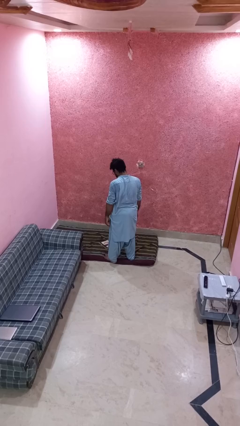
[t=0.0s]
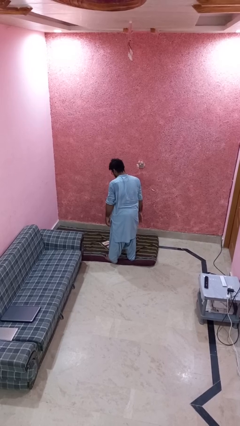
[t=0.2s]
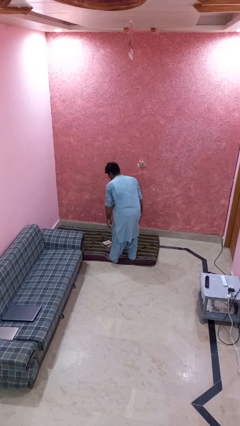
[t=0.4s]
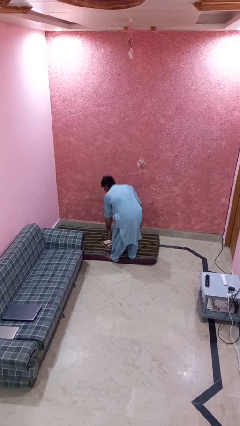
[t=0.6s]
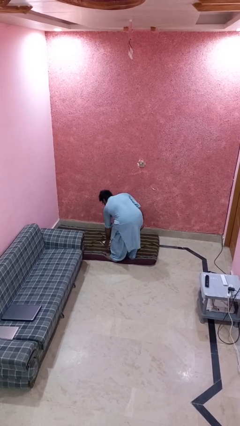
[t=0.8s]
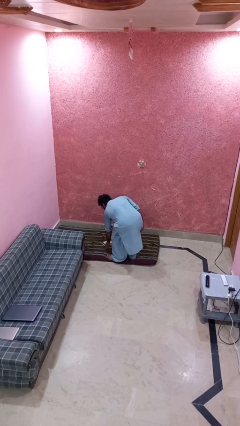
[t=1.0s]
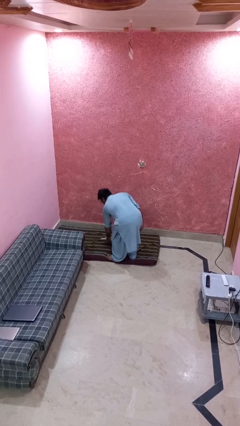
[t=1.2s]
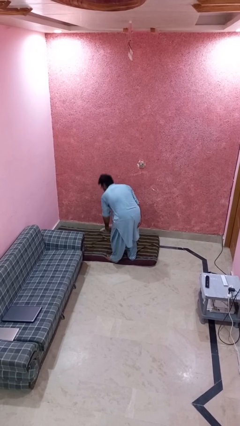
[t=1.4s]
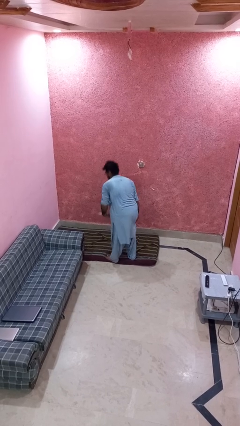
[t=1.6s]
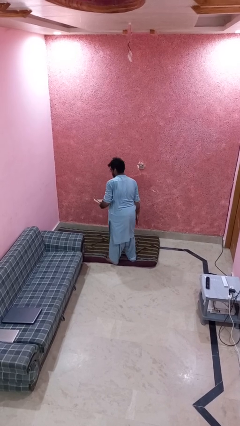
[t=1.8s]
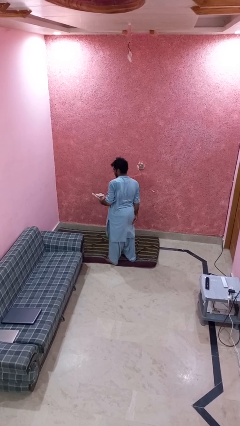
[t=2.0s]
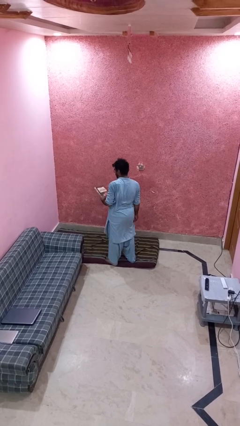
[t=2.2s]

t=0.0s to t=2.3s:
person picks up object from floor

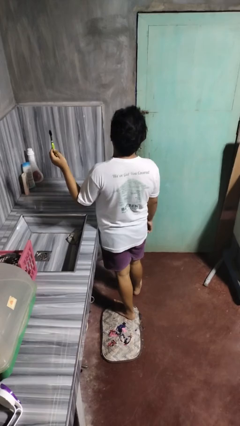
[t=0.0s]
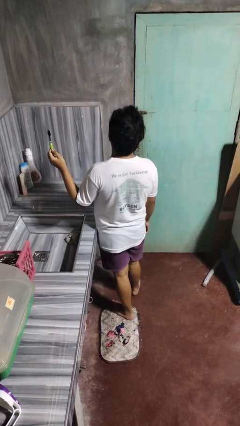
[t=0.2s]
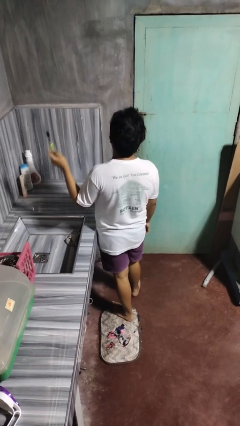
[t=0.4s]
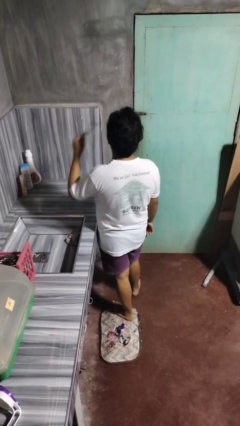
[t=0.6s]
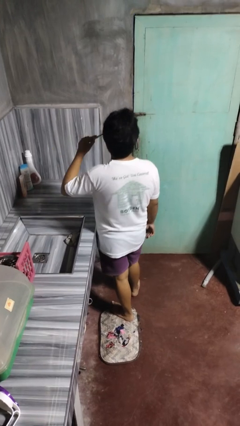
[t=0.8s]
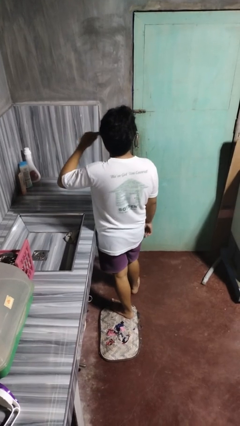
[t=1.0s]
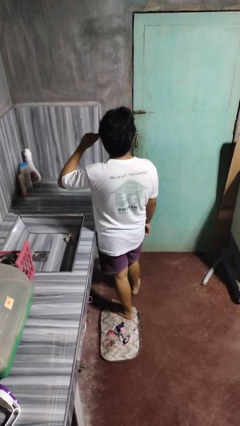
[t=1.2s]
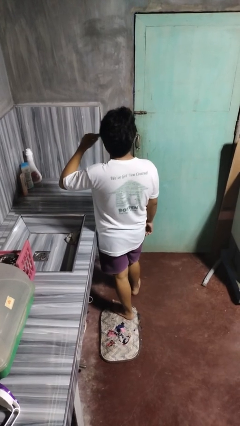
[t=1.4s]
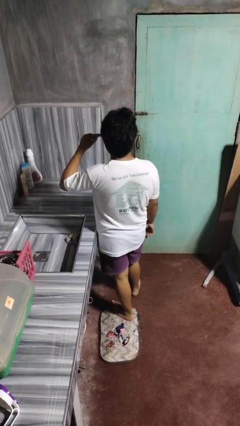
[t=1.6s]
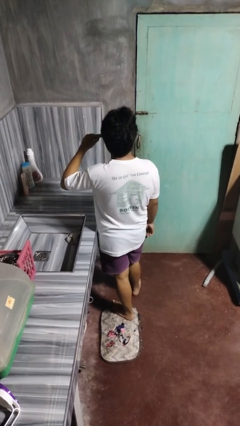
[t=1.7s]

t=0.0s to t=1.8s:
person brushes teeth

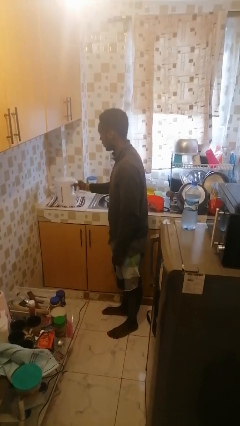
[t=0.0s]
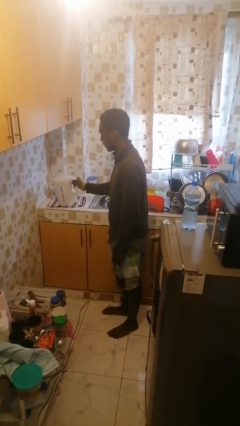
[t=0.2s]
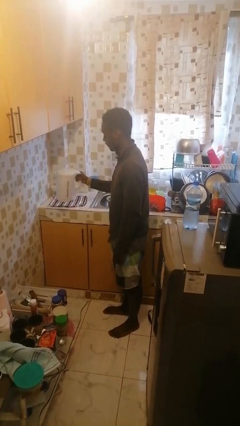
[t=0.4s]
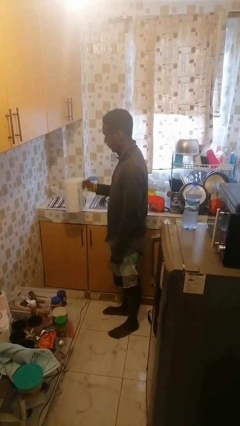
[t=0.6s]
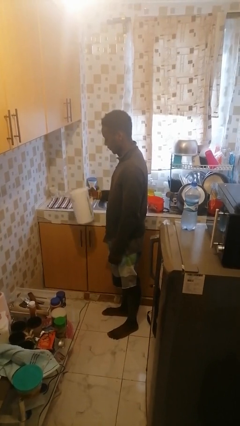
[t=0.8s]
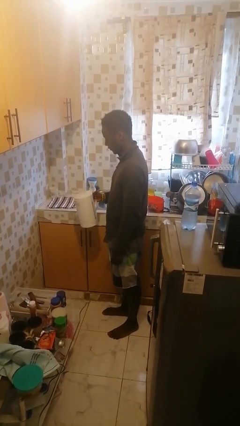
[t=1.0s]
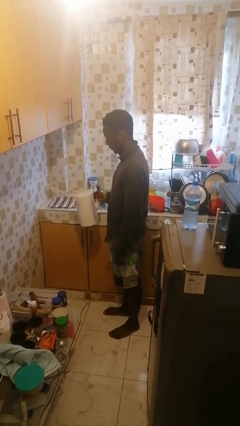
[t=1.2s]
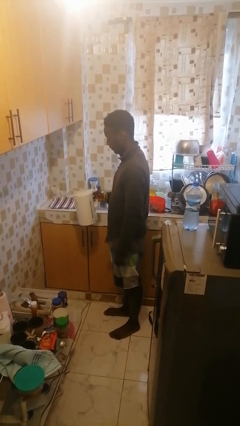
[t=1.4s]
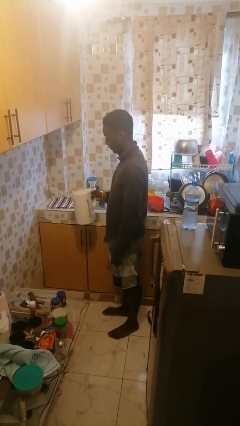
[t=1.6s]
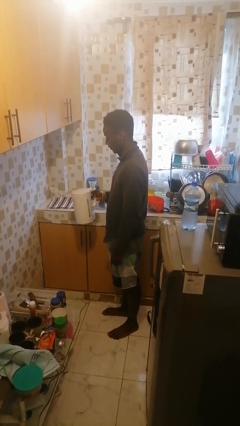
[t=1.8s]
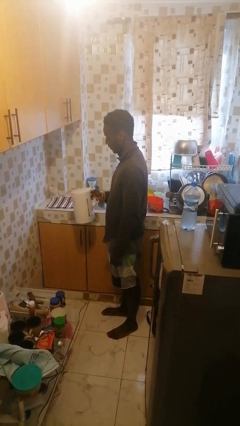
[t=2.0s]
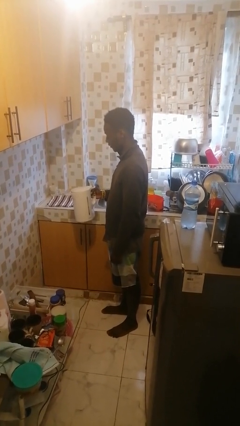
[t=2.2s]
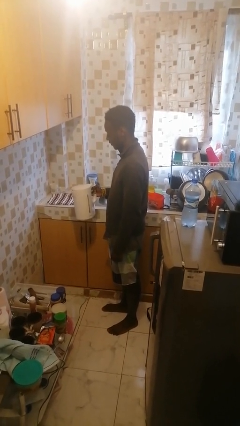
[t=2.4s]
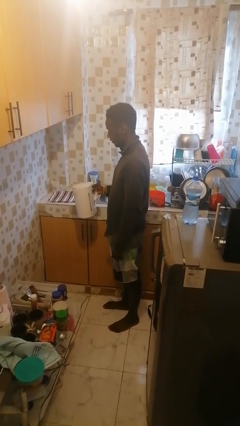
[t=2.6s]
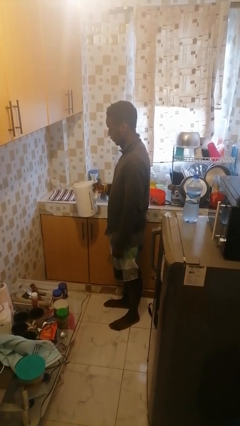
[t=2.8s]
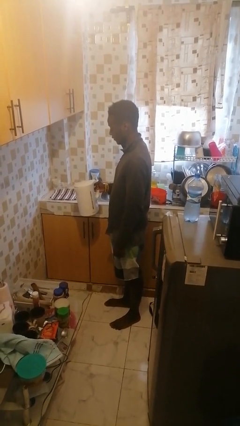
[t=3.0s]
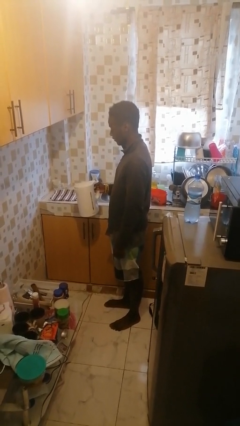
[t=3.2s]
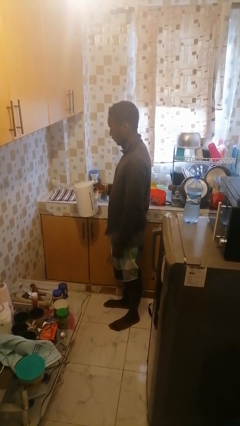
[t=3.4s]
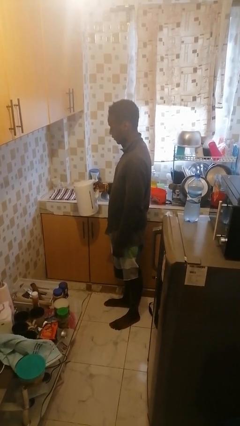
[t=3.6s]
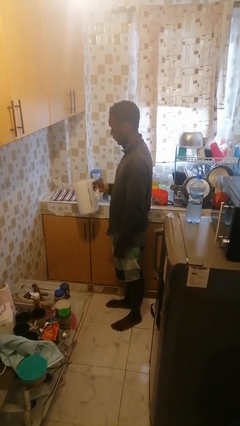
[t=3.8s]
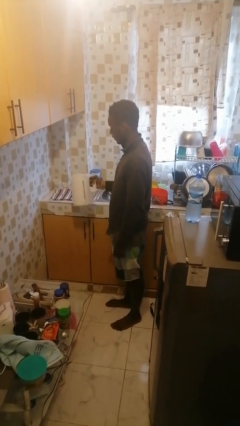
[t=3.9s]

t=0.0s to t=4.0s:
person picks up object from countertop

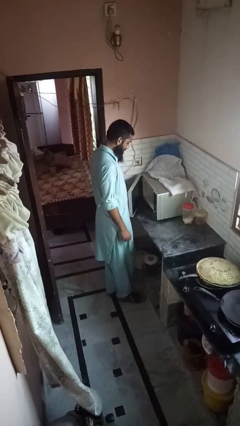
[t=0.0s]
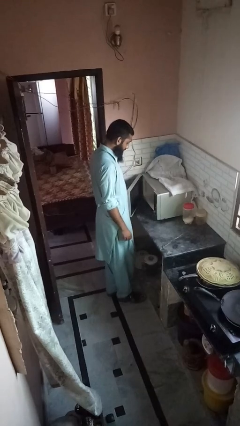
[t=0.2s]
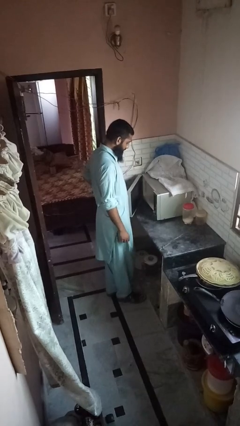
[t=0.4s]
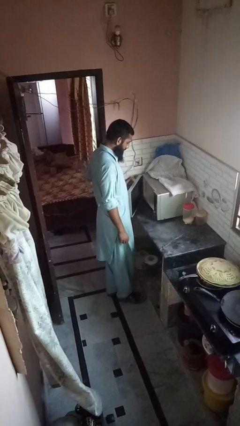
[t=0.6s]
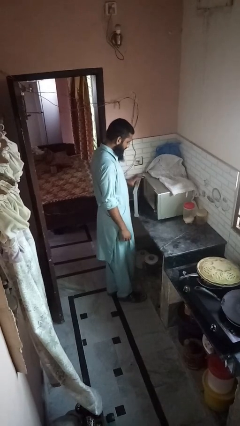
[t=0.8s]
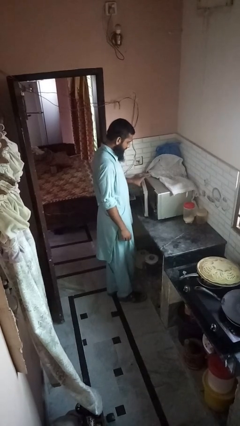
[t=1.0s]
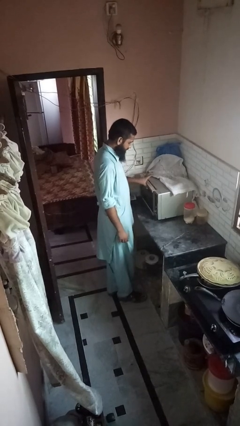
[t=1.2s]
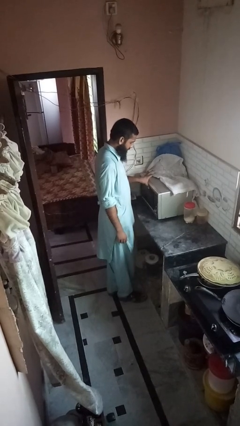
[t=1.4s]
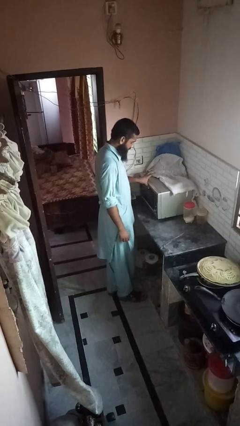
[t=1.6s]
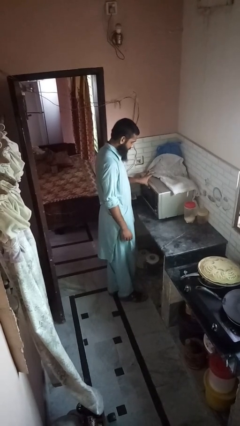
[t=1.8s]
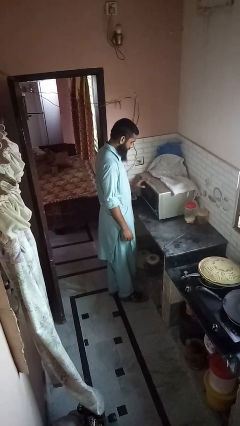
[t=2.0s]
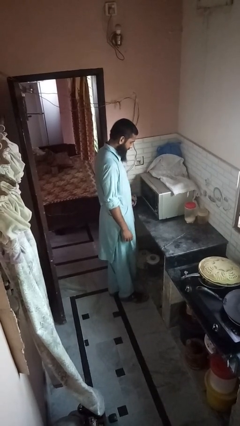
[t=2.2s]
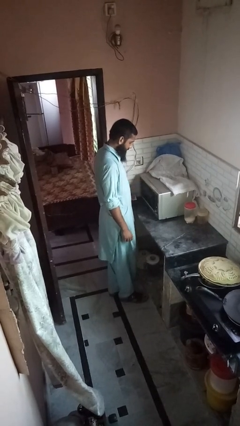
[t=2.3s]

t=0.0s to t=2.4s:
person closes microwave

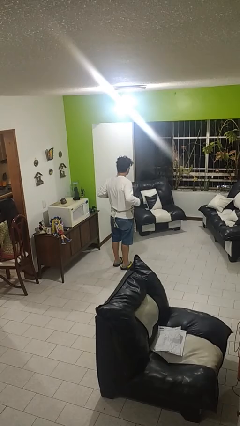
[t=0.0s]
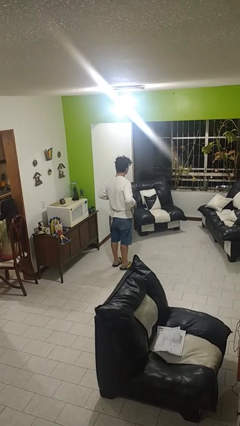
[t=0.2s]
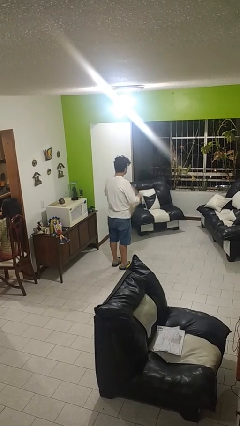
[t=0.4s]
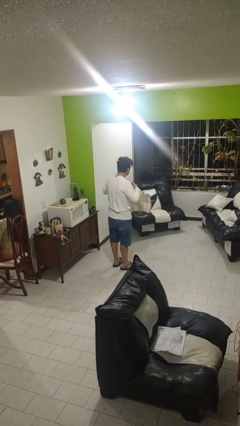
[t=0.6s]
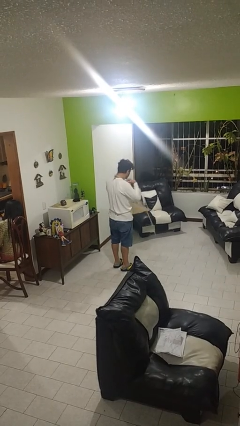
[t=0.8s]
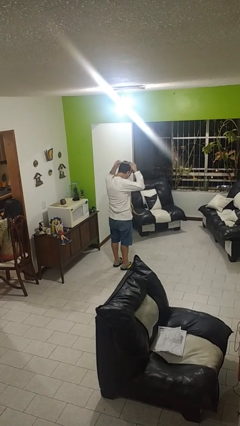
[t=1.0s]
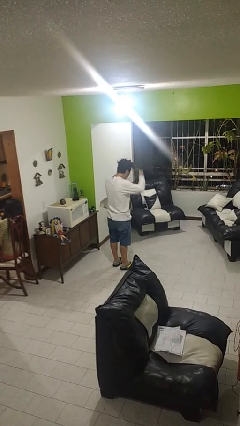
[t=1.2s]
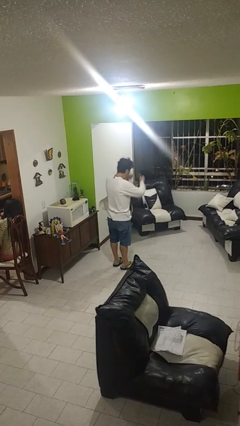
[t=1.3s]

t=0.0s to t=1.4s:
person takes off apron

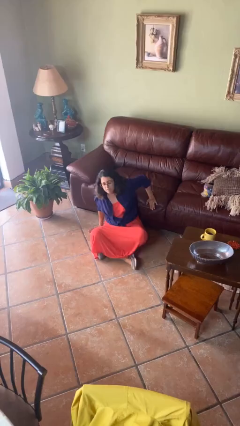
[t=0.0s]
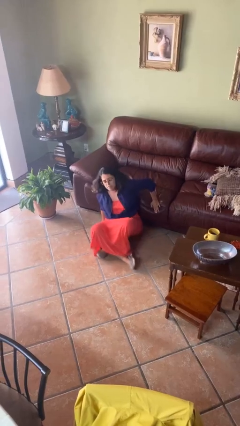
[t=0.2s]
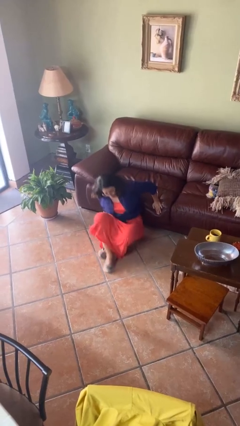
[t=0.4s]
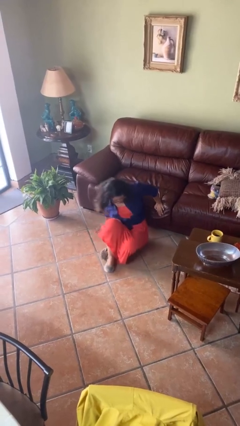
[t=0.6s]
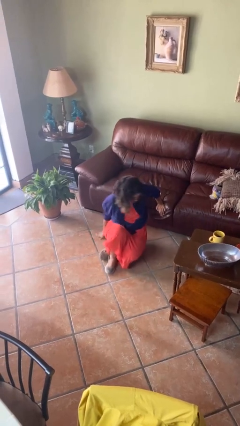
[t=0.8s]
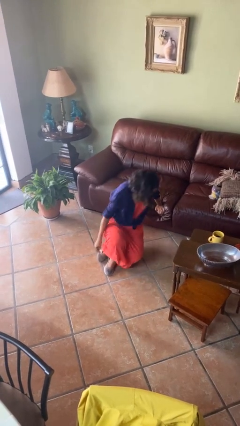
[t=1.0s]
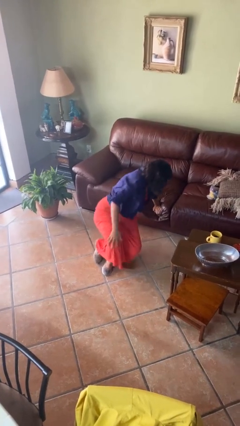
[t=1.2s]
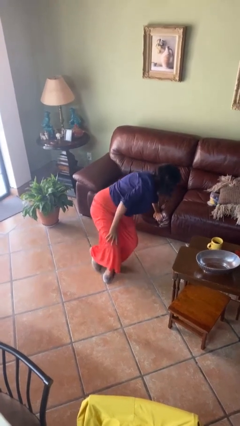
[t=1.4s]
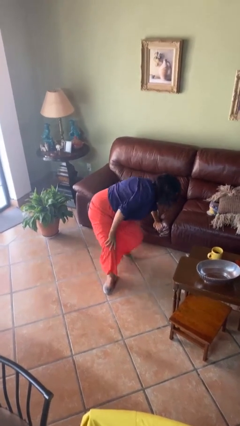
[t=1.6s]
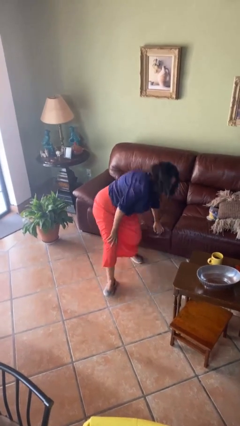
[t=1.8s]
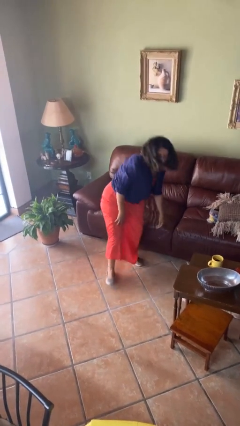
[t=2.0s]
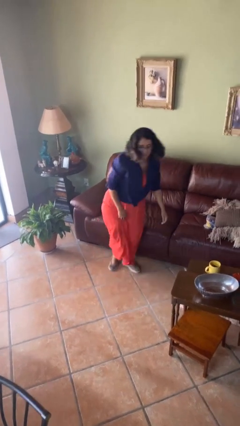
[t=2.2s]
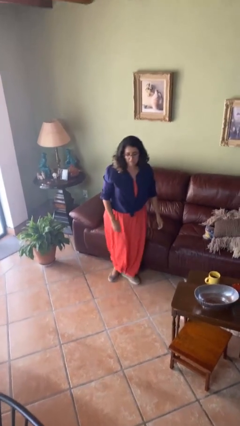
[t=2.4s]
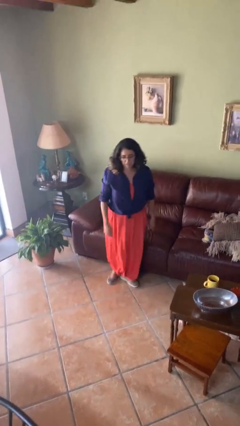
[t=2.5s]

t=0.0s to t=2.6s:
person stands up from floor

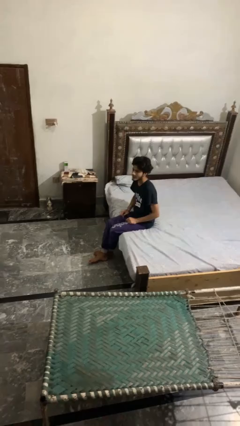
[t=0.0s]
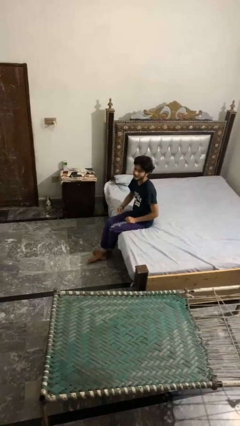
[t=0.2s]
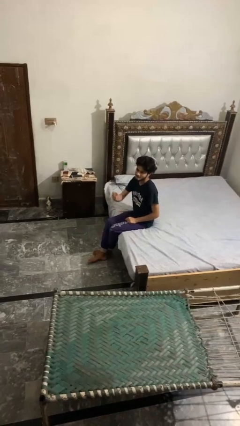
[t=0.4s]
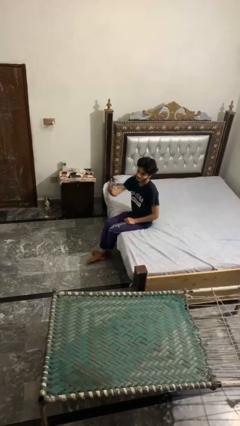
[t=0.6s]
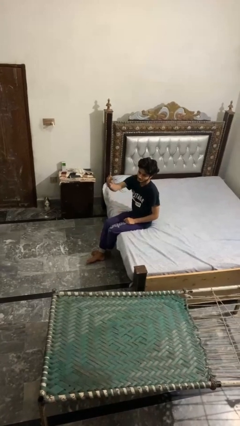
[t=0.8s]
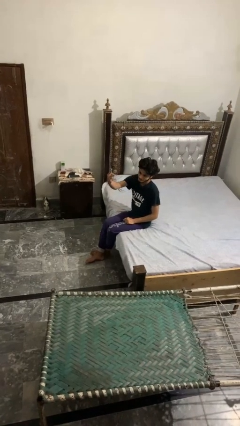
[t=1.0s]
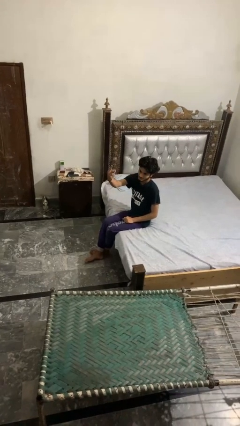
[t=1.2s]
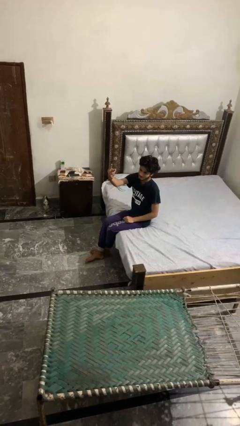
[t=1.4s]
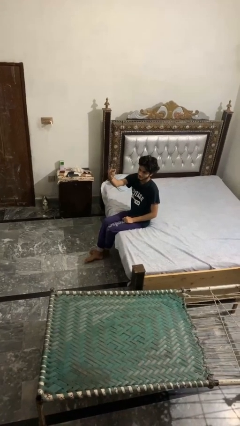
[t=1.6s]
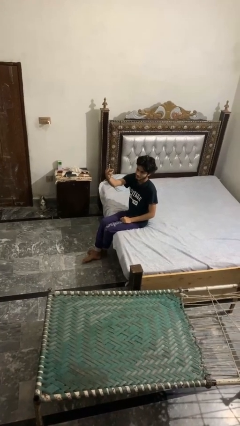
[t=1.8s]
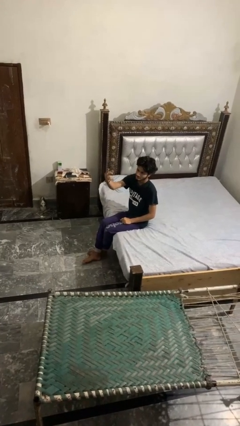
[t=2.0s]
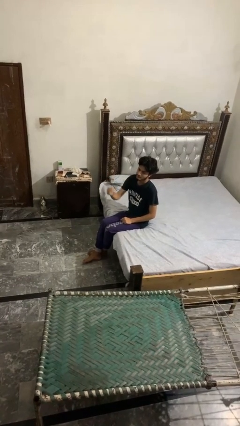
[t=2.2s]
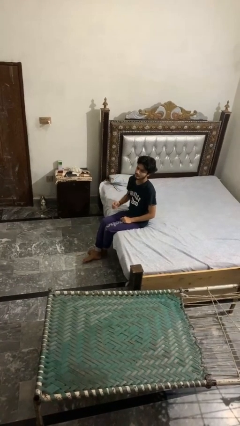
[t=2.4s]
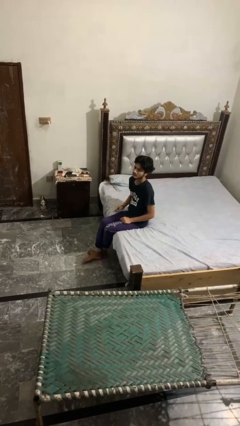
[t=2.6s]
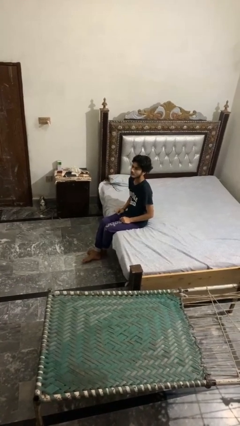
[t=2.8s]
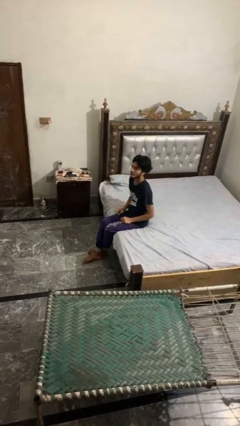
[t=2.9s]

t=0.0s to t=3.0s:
person gestures peace
